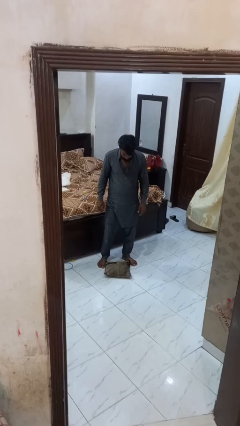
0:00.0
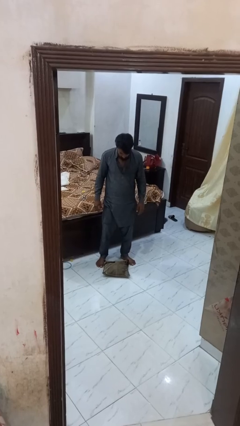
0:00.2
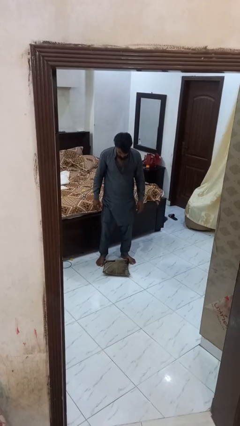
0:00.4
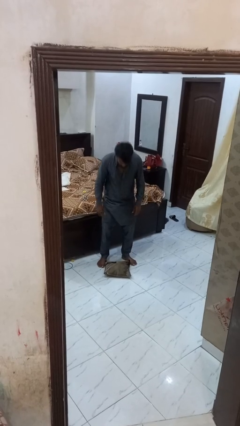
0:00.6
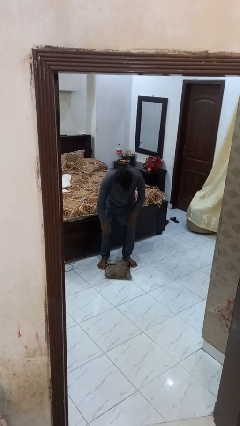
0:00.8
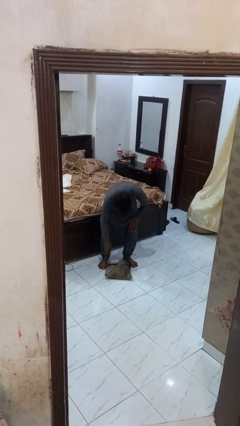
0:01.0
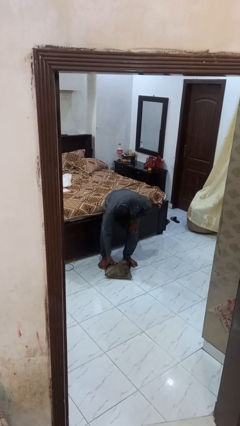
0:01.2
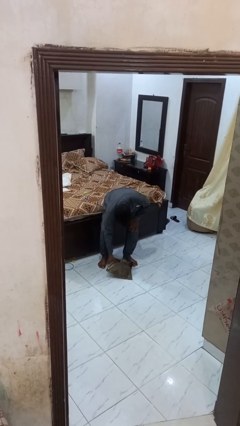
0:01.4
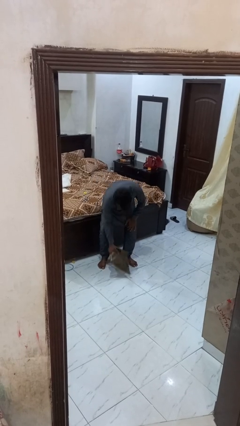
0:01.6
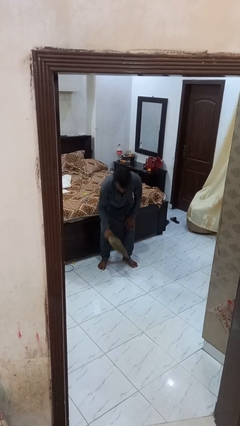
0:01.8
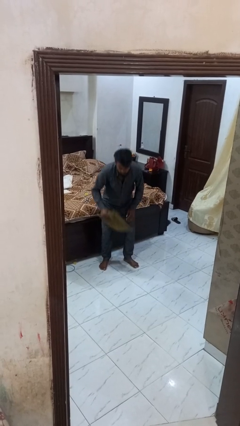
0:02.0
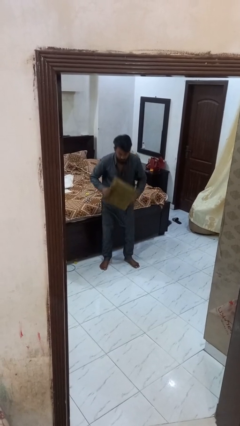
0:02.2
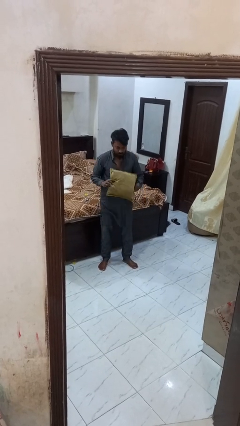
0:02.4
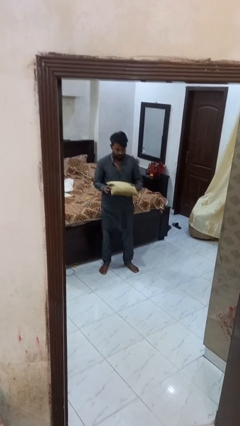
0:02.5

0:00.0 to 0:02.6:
person picks up object from floor

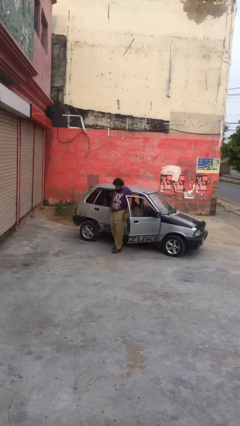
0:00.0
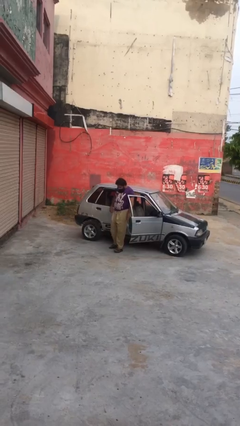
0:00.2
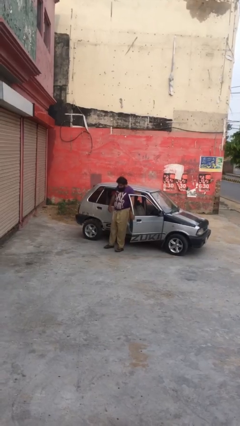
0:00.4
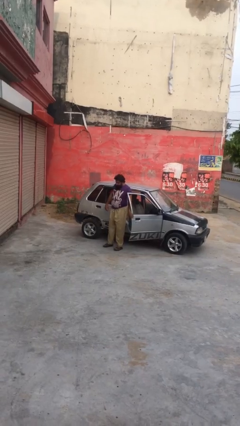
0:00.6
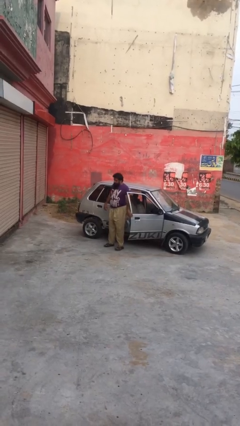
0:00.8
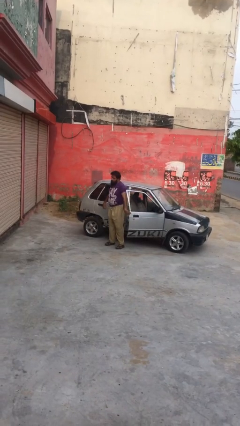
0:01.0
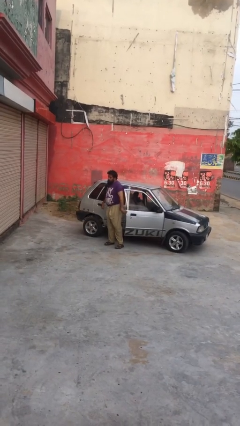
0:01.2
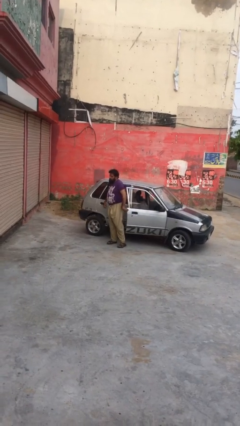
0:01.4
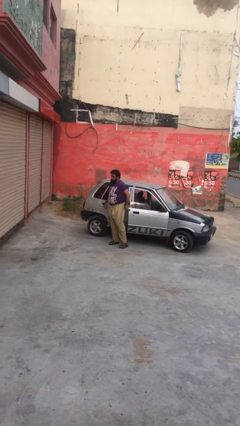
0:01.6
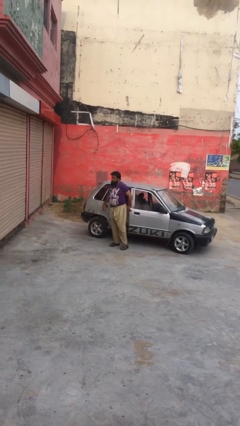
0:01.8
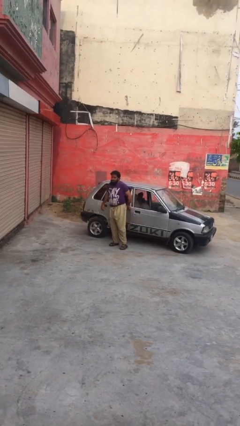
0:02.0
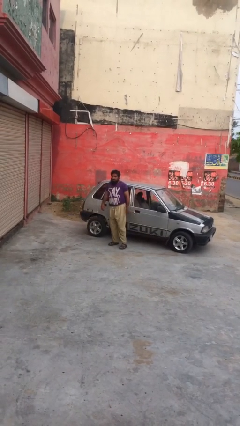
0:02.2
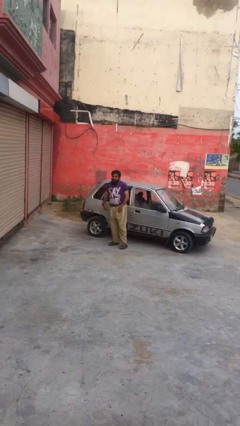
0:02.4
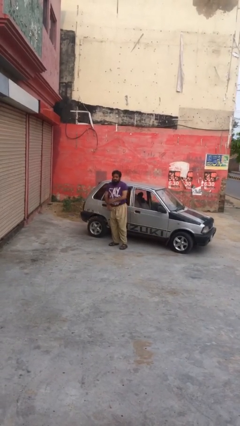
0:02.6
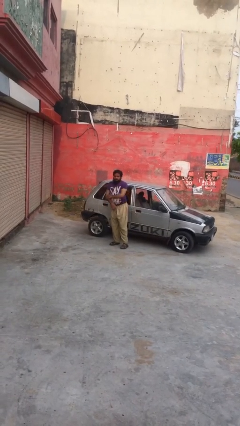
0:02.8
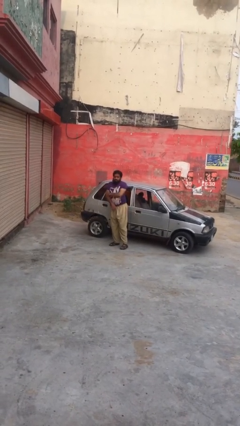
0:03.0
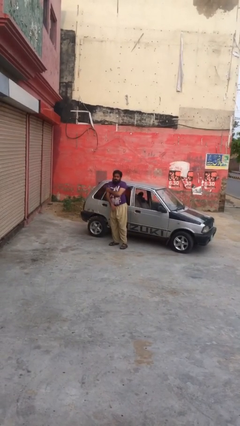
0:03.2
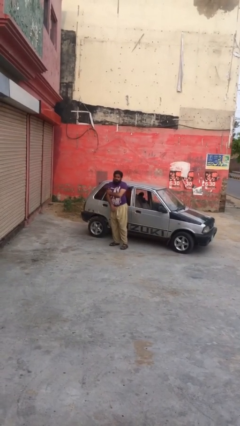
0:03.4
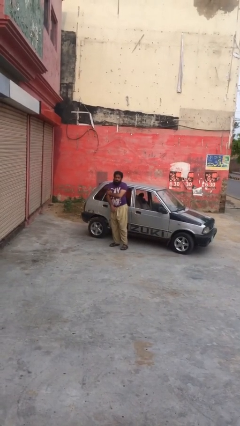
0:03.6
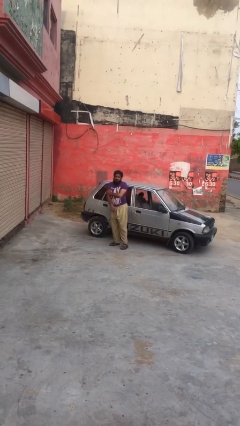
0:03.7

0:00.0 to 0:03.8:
person closes car door

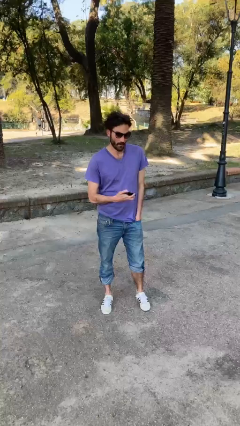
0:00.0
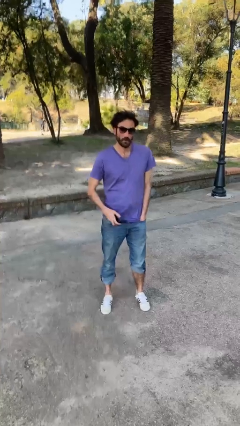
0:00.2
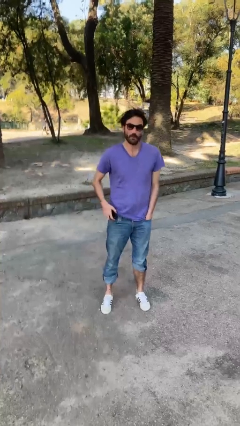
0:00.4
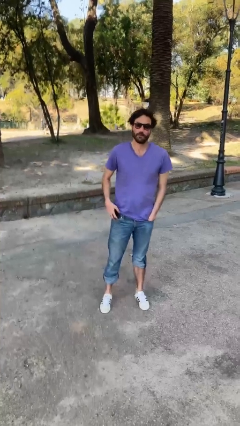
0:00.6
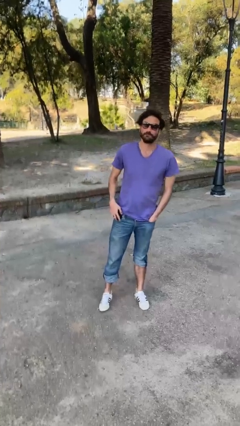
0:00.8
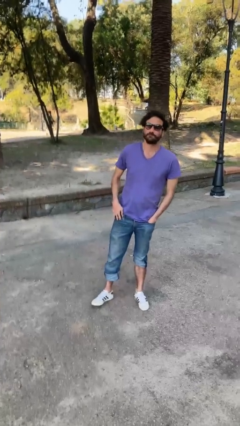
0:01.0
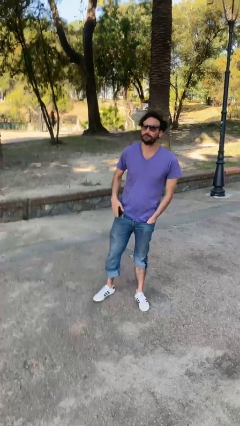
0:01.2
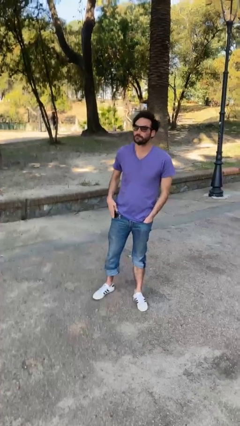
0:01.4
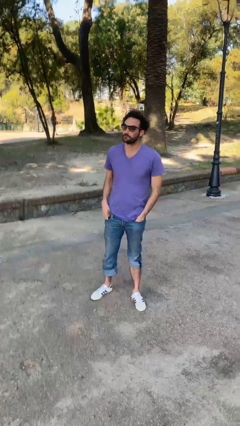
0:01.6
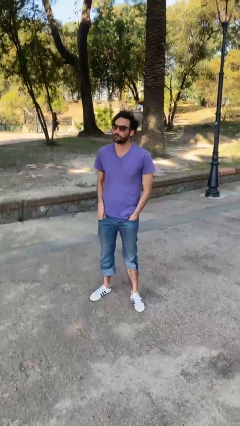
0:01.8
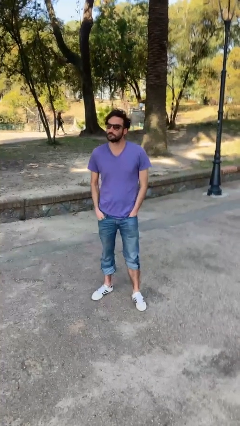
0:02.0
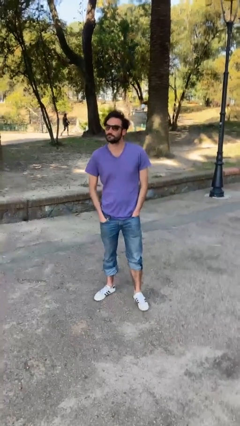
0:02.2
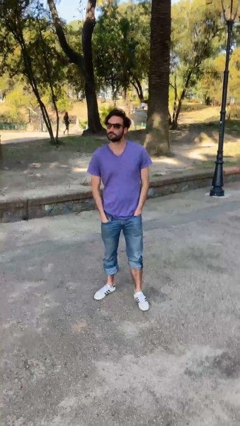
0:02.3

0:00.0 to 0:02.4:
person puts phone into pocket

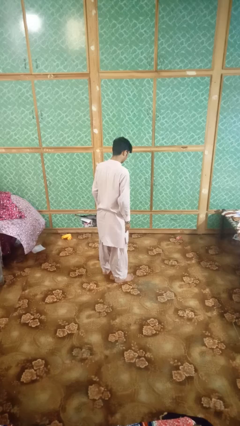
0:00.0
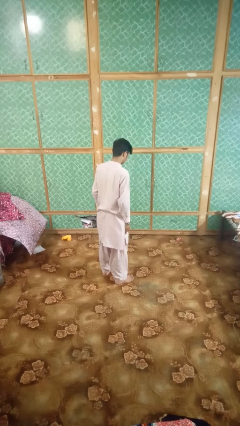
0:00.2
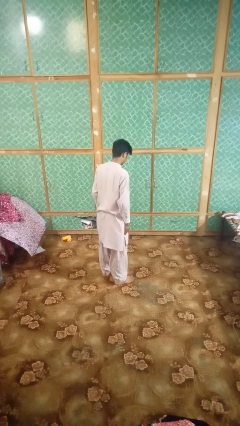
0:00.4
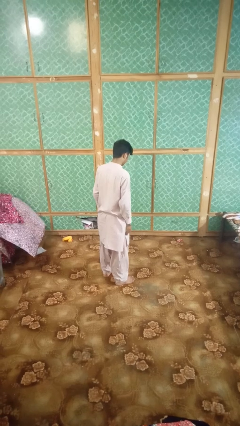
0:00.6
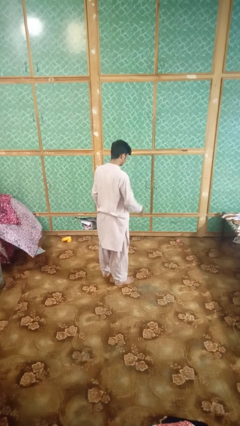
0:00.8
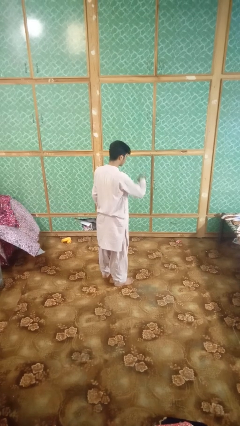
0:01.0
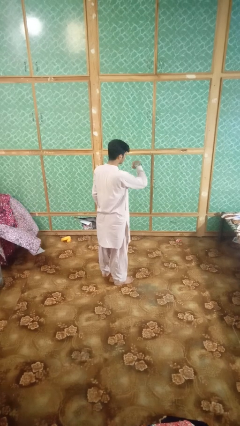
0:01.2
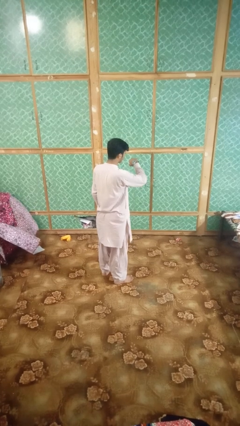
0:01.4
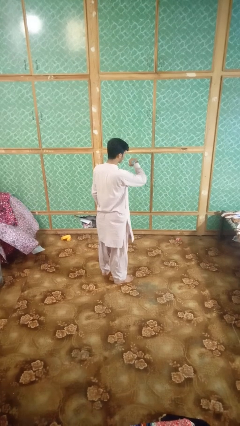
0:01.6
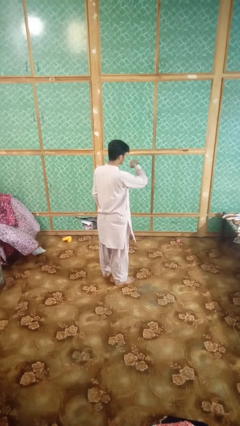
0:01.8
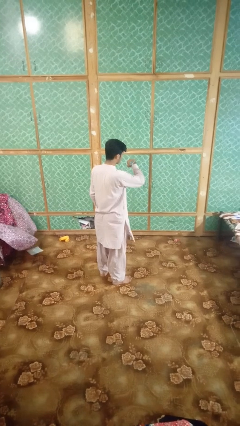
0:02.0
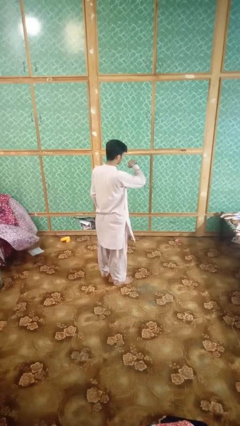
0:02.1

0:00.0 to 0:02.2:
person looks at wristwatch

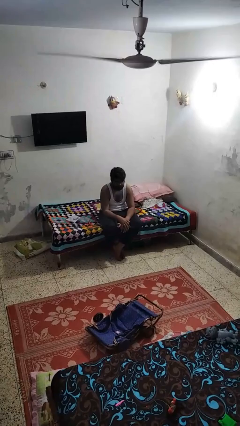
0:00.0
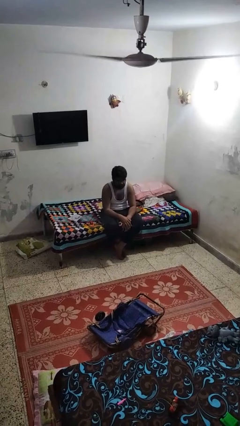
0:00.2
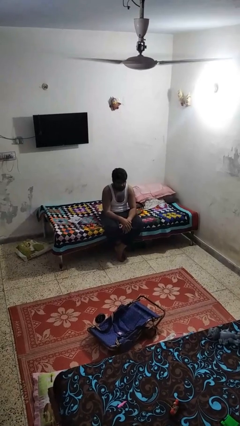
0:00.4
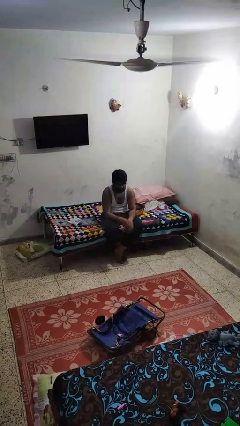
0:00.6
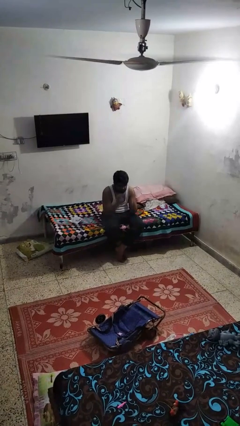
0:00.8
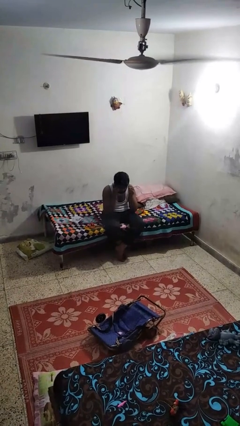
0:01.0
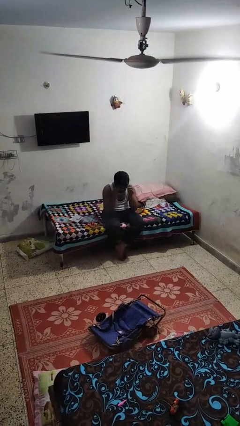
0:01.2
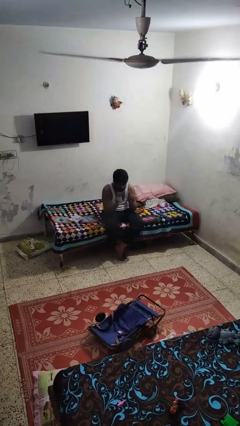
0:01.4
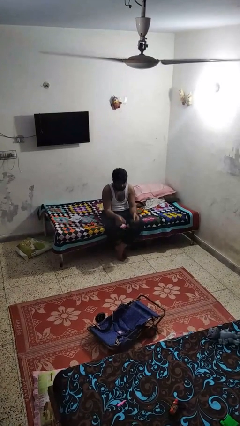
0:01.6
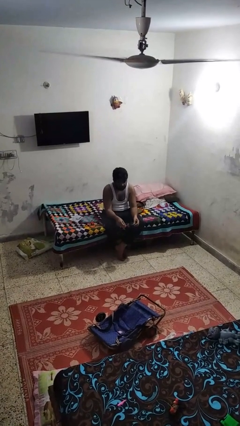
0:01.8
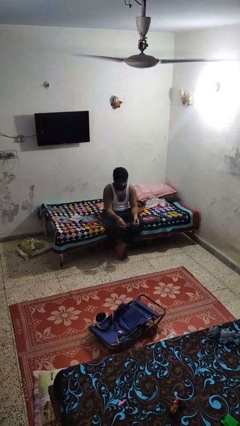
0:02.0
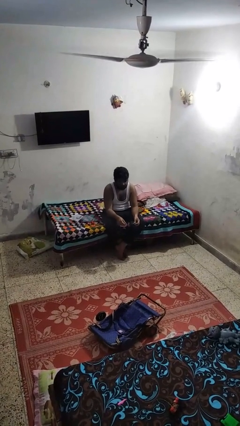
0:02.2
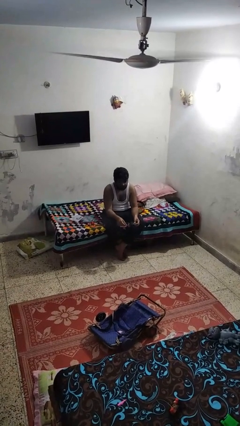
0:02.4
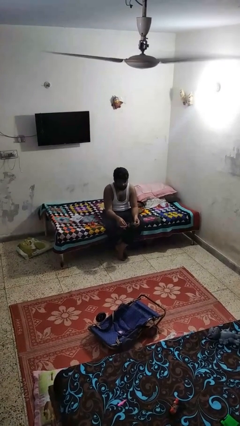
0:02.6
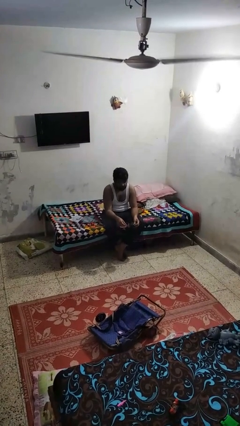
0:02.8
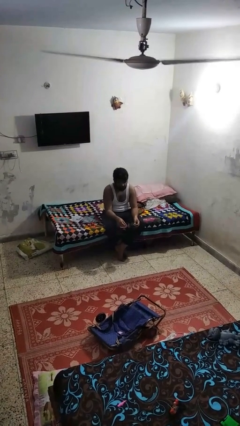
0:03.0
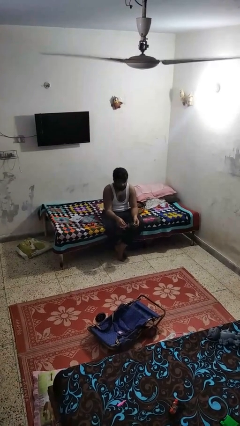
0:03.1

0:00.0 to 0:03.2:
person takes off glasses

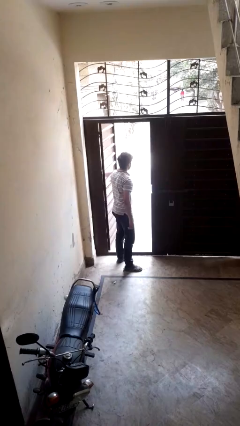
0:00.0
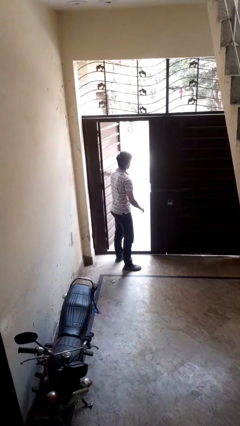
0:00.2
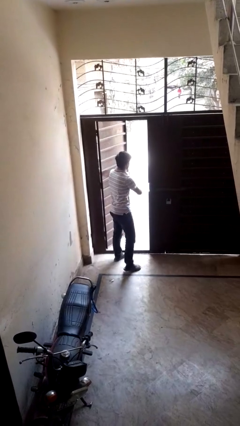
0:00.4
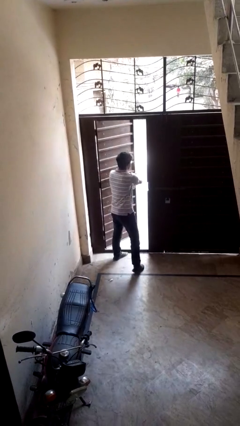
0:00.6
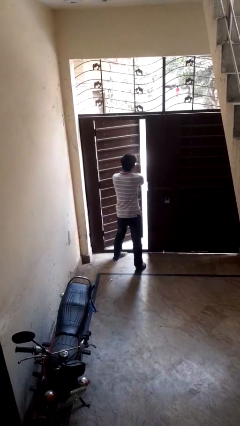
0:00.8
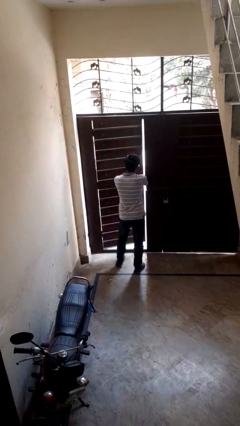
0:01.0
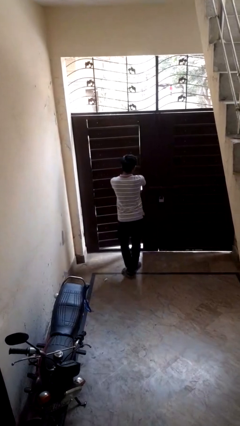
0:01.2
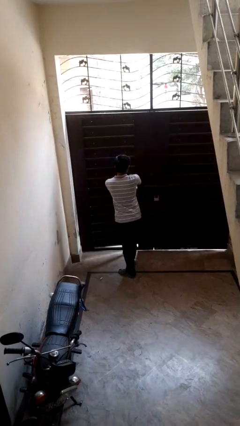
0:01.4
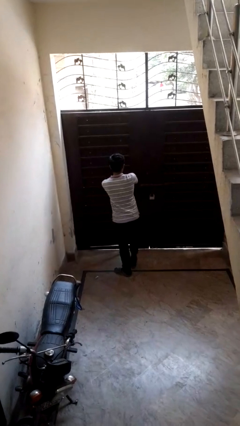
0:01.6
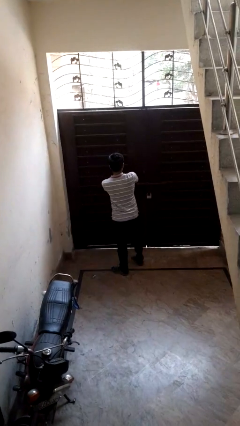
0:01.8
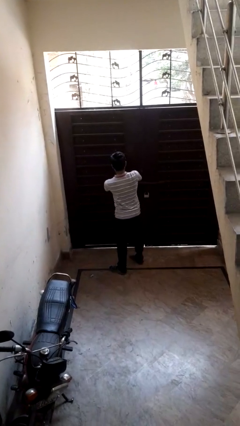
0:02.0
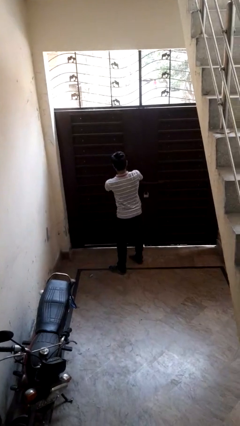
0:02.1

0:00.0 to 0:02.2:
person closes facility door

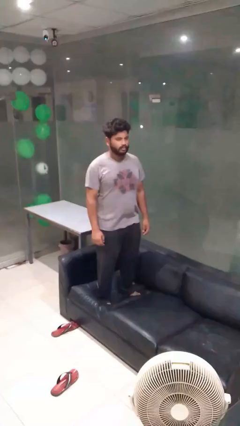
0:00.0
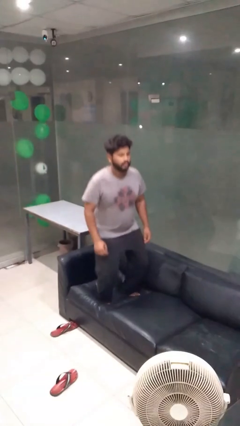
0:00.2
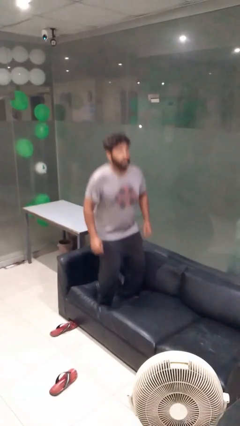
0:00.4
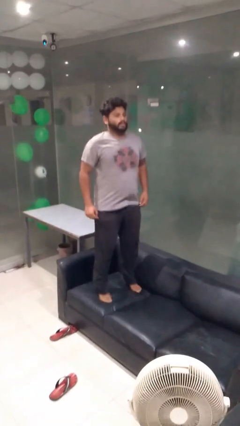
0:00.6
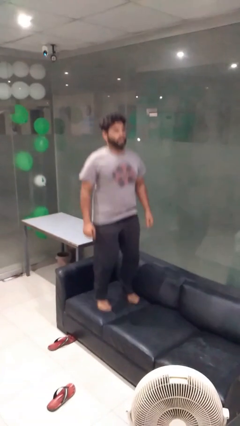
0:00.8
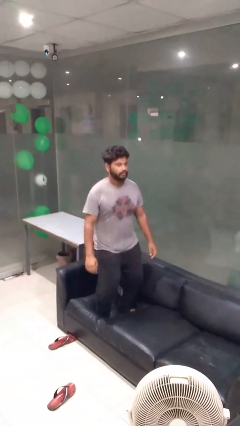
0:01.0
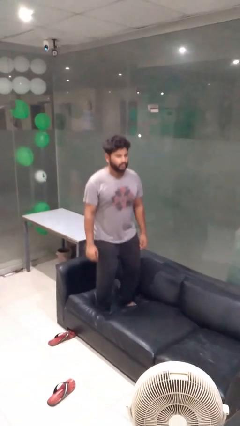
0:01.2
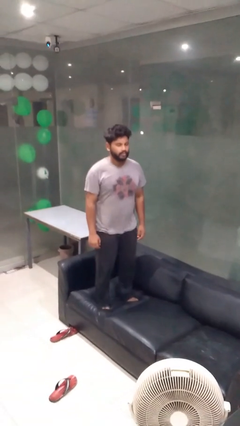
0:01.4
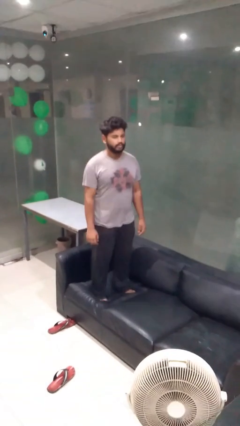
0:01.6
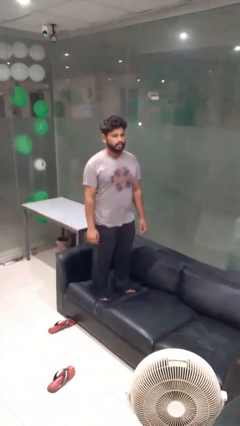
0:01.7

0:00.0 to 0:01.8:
person jumps on couch
